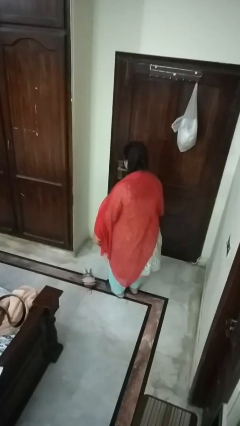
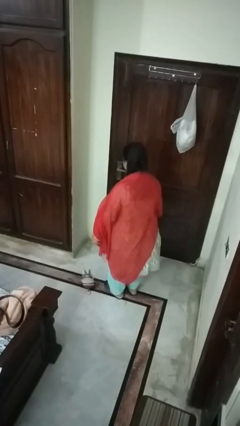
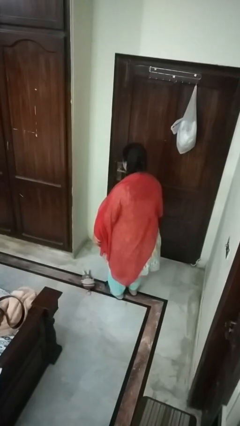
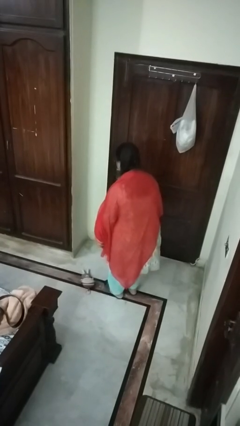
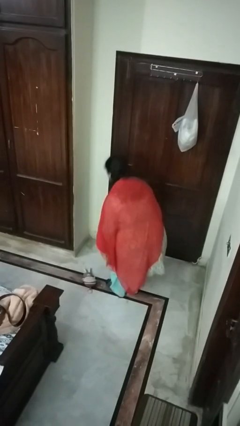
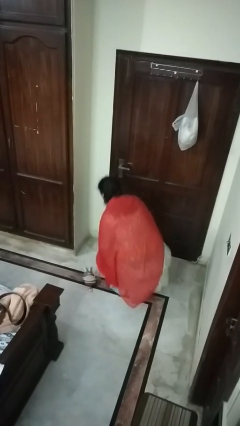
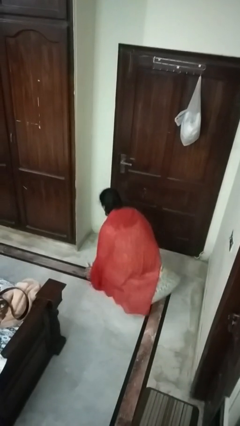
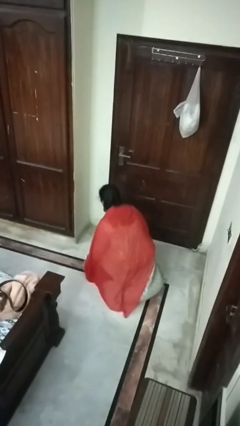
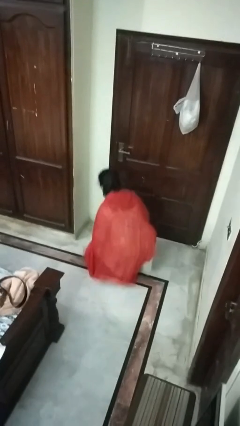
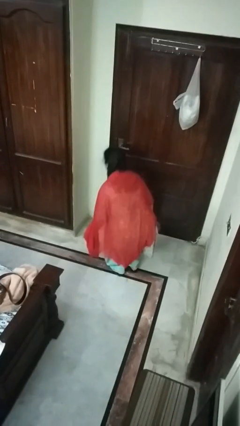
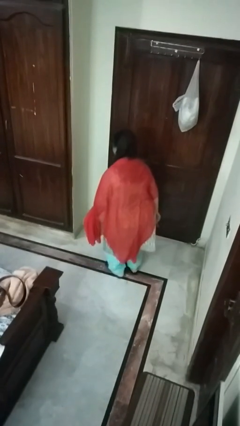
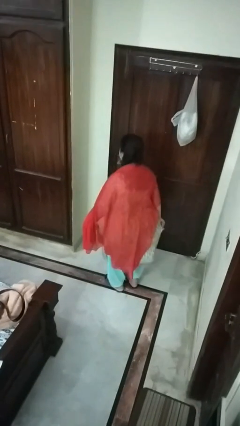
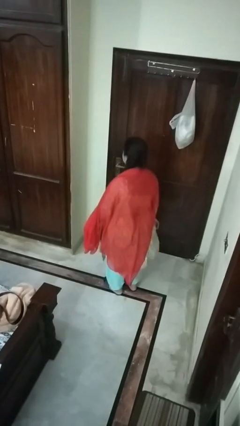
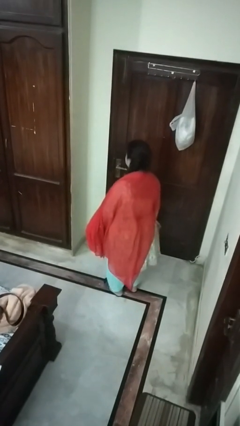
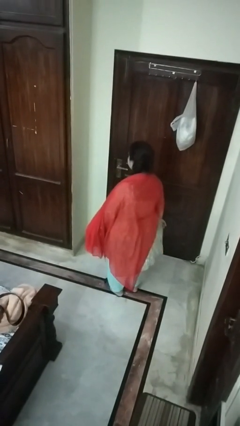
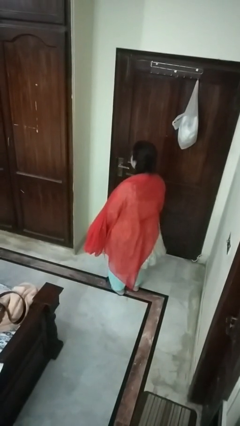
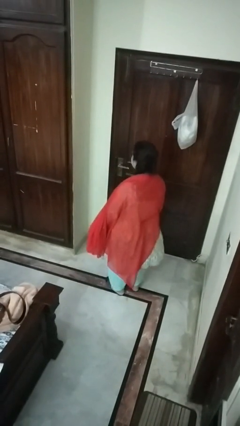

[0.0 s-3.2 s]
person picks up object from floor

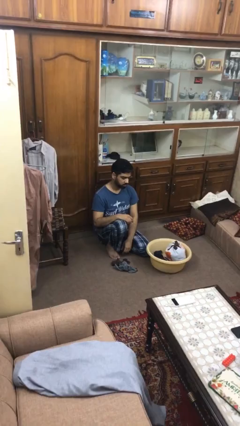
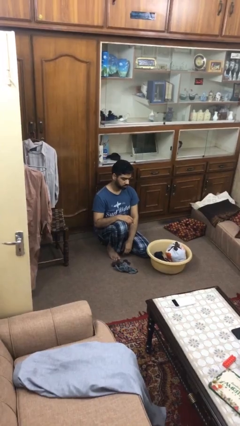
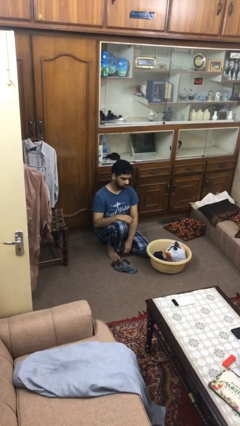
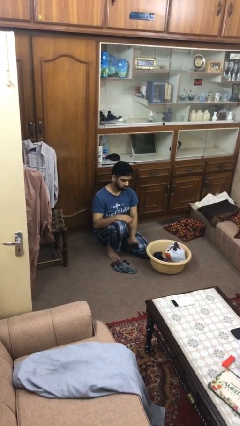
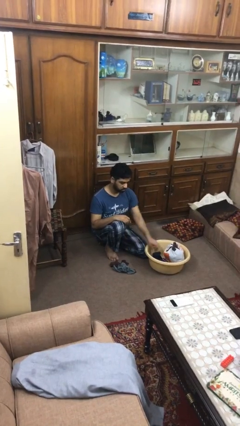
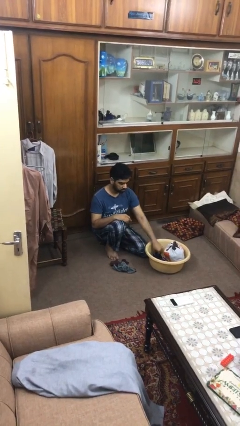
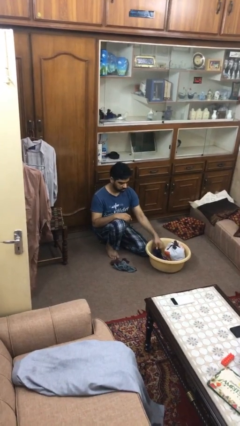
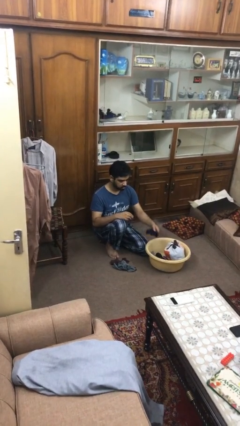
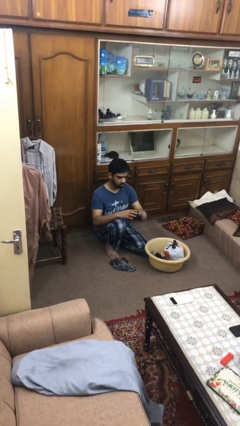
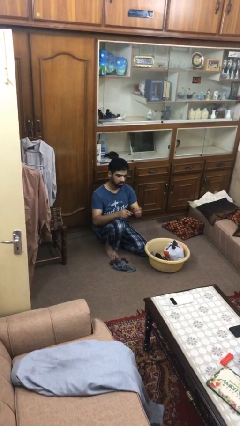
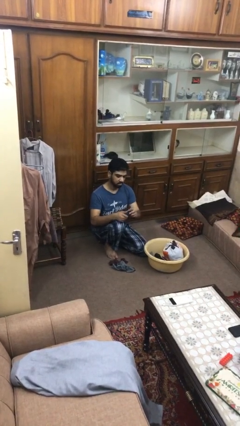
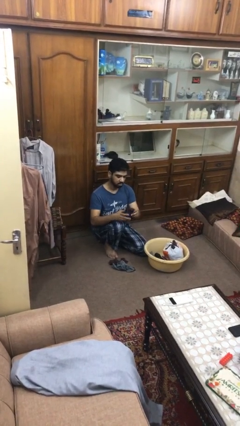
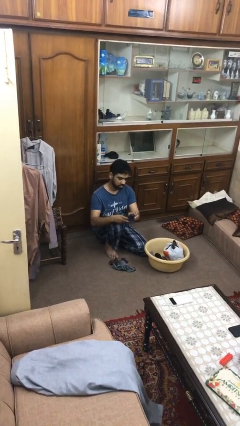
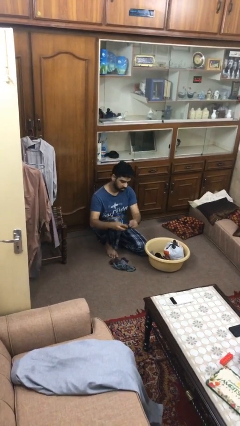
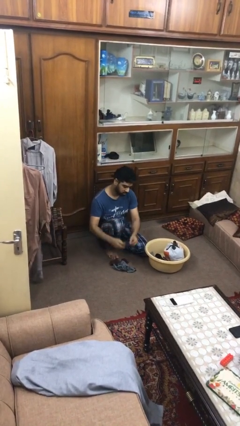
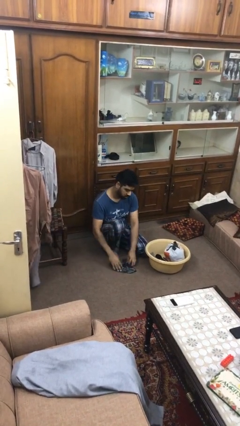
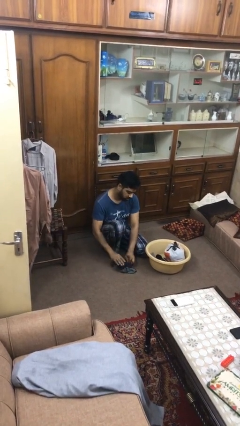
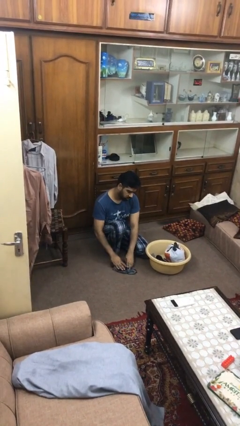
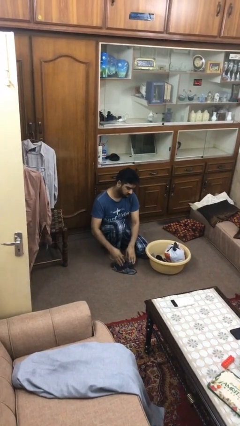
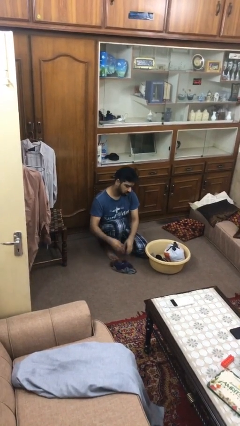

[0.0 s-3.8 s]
person folds socks

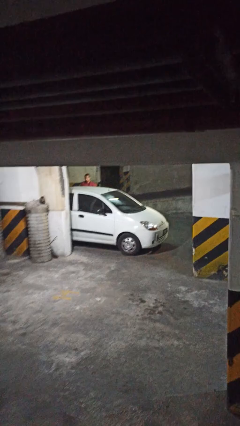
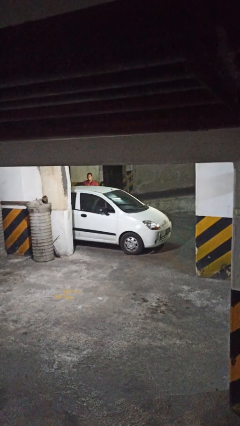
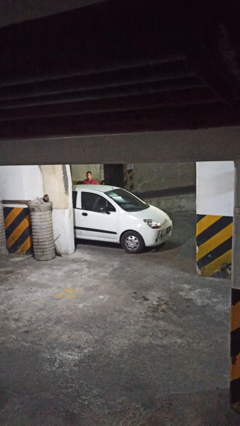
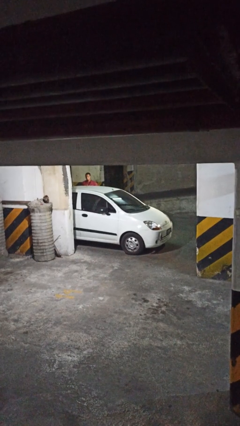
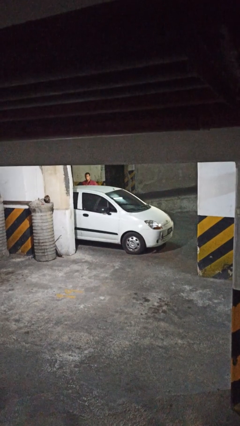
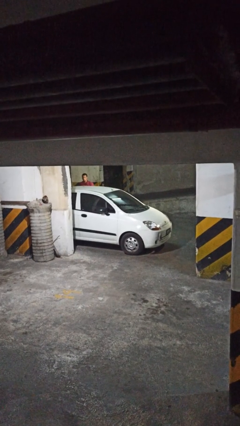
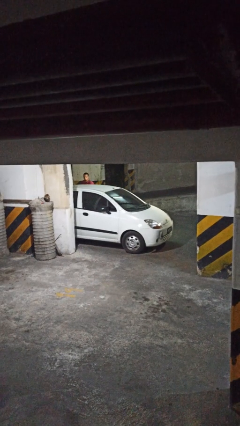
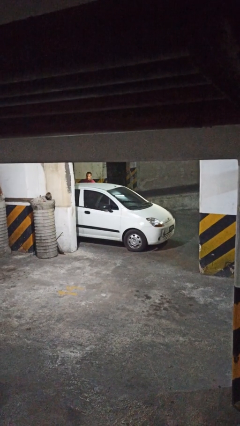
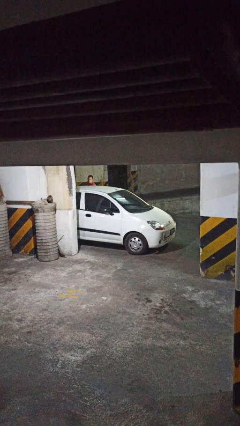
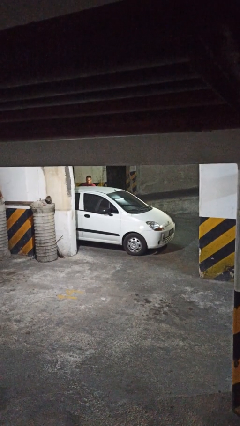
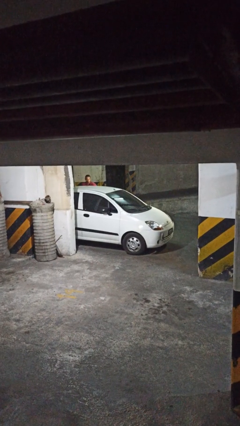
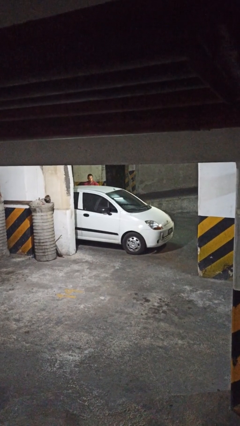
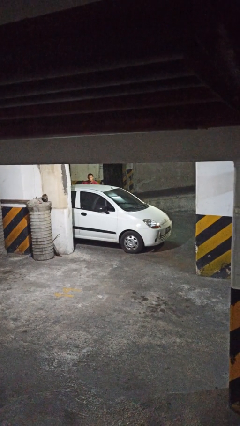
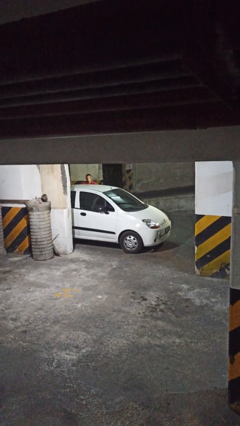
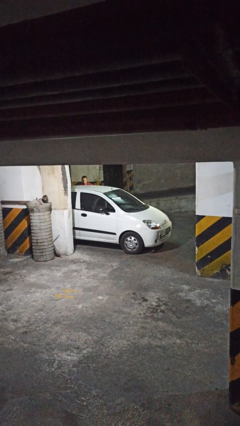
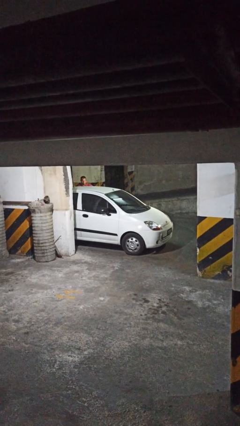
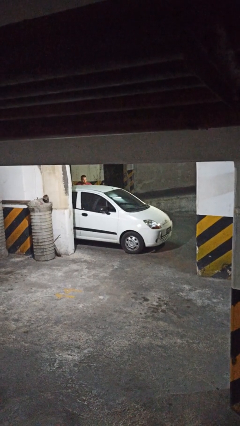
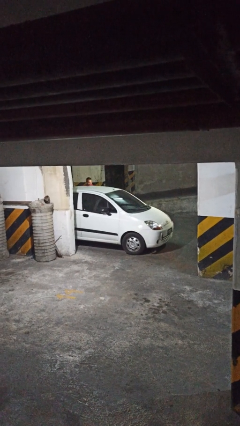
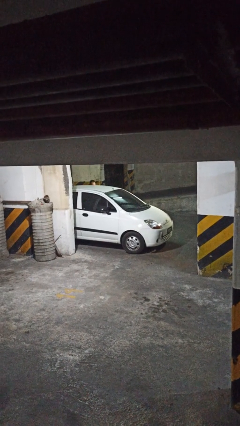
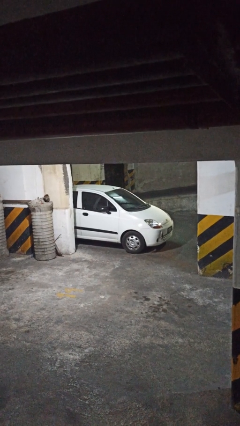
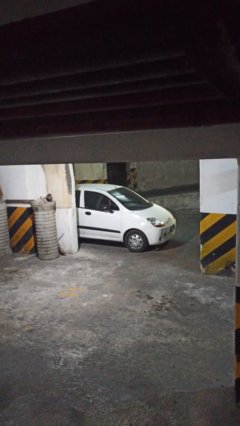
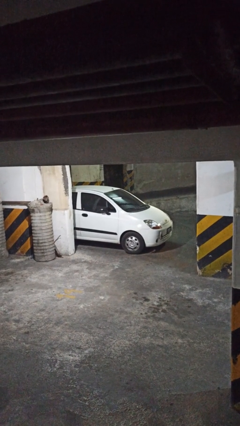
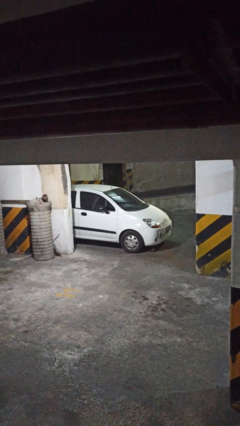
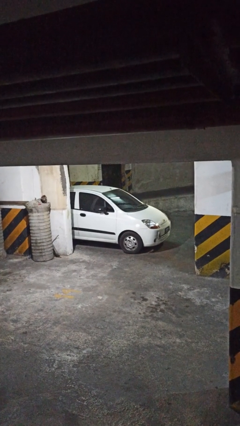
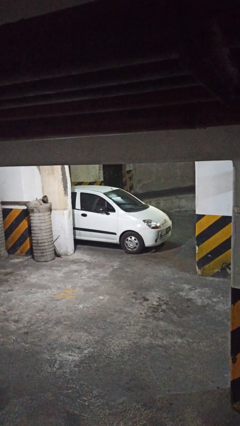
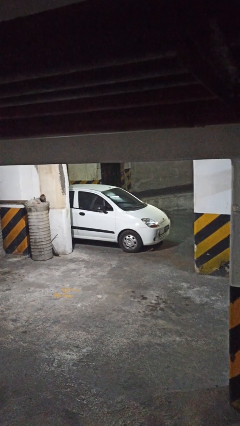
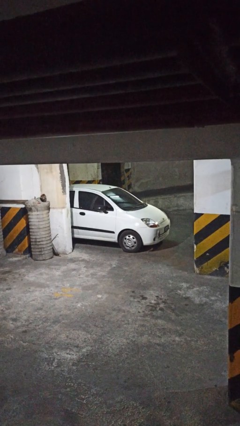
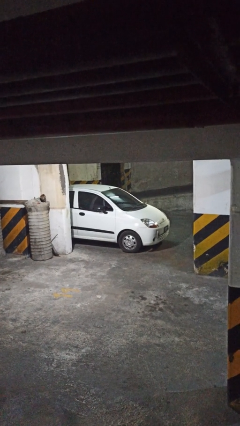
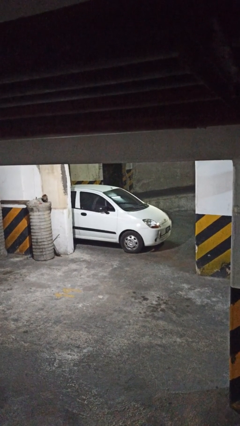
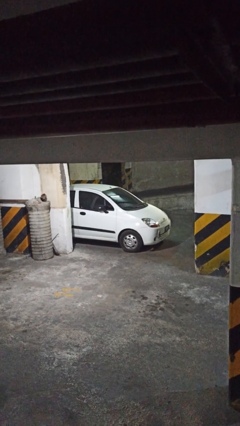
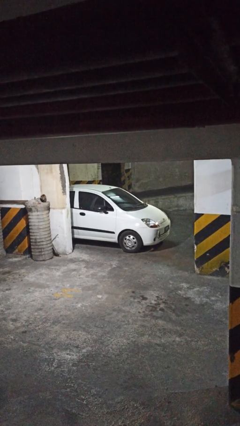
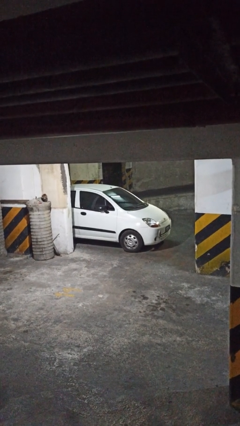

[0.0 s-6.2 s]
car picks up person

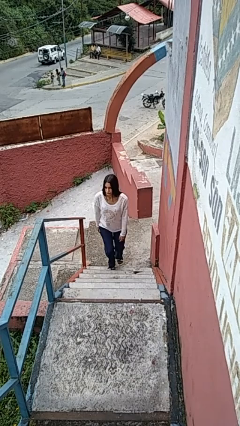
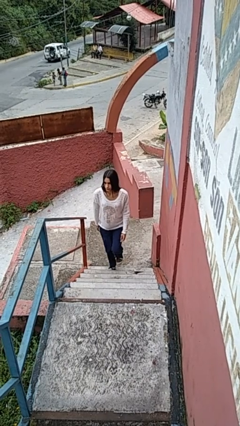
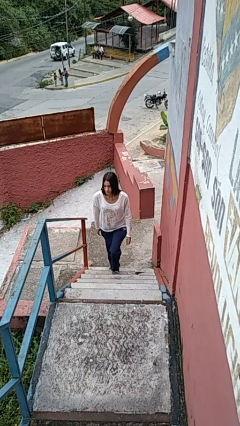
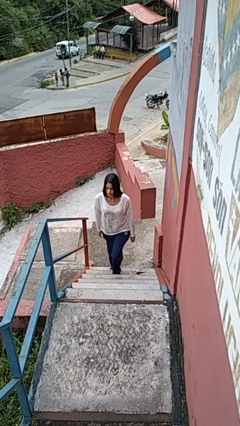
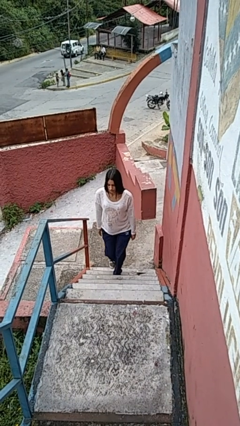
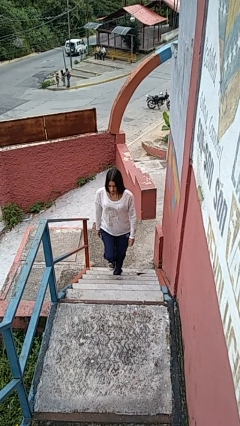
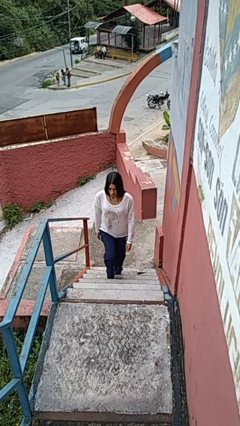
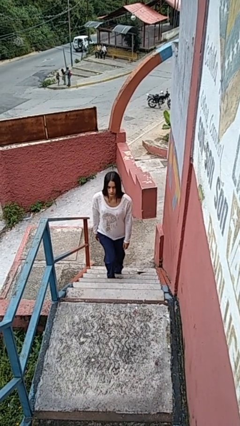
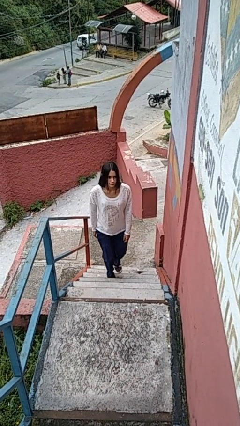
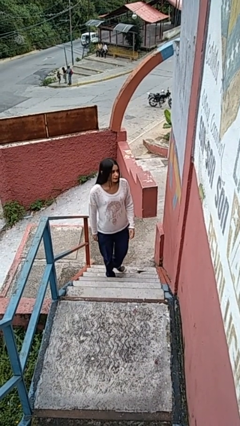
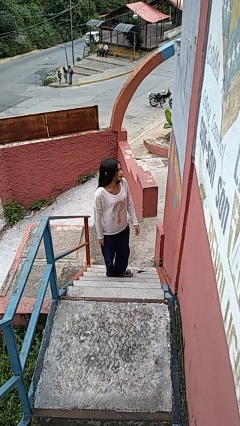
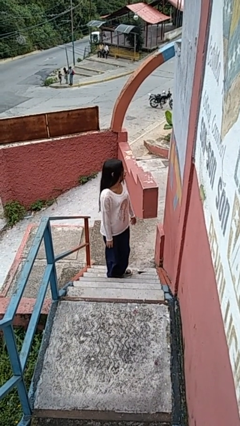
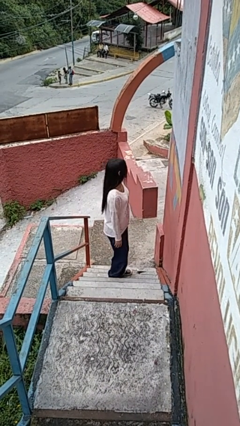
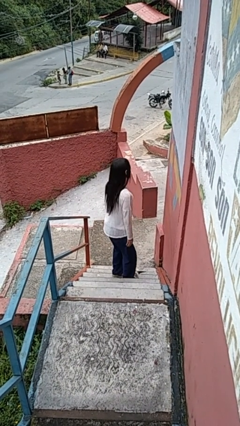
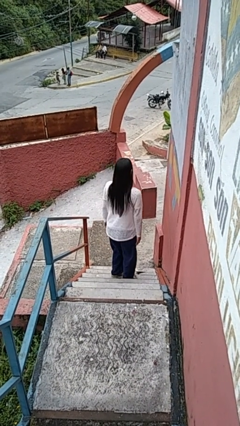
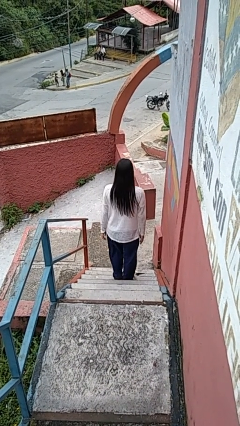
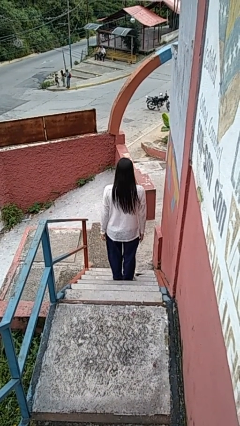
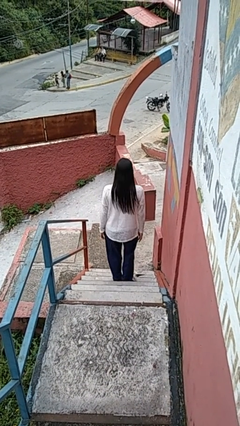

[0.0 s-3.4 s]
person climbs up stairs

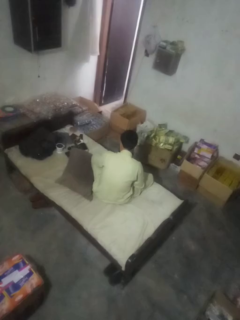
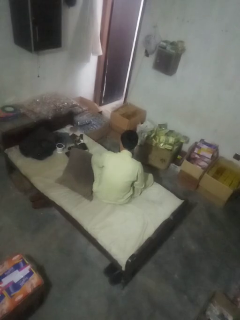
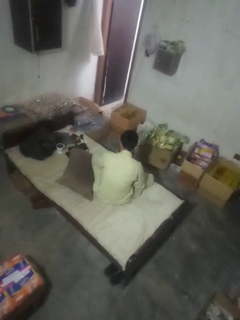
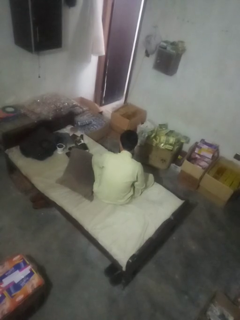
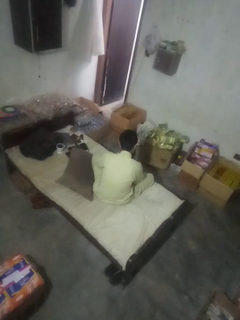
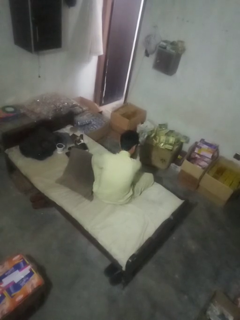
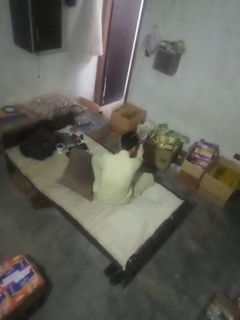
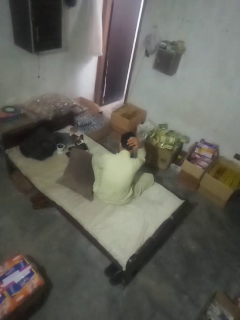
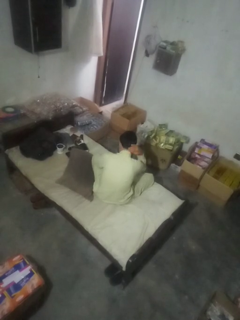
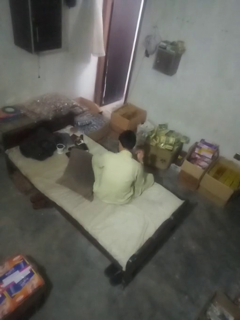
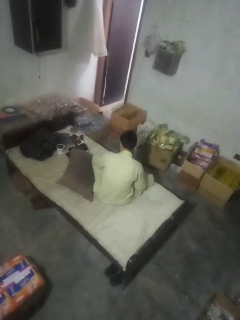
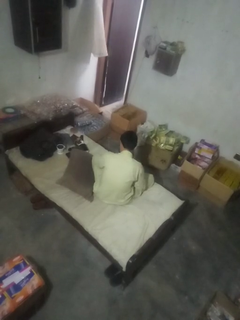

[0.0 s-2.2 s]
person strokes hair
